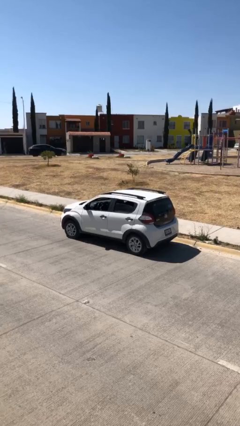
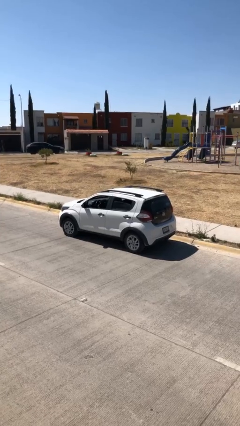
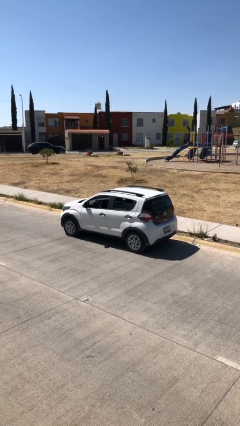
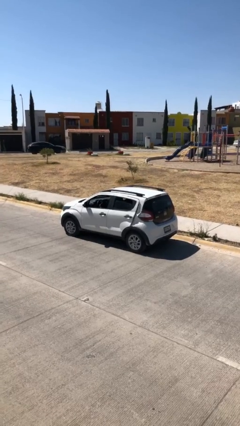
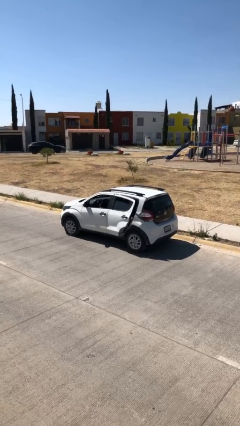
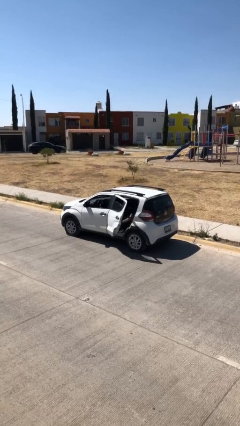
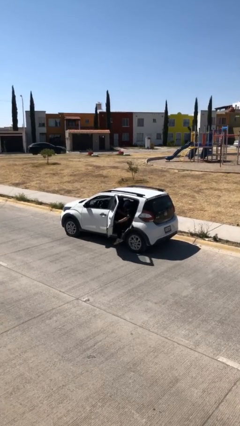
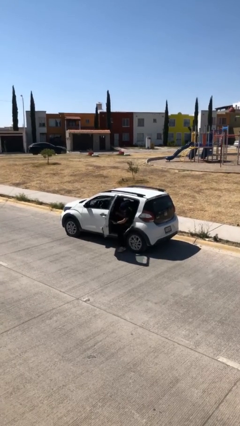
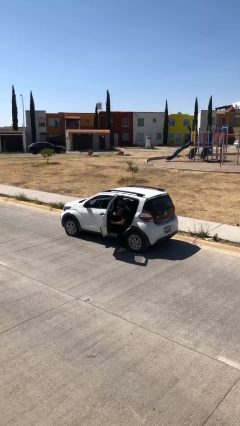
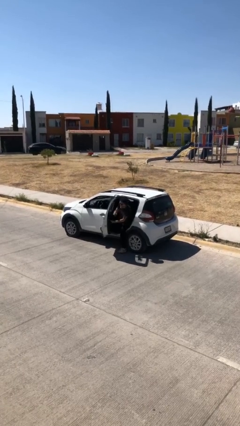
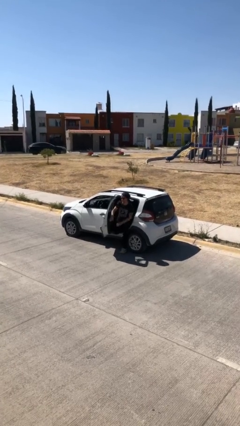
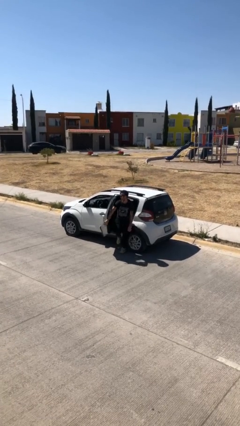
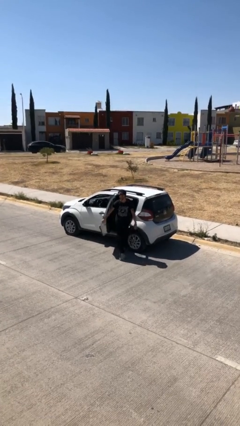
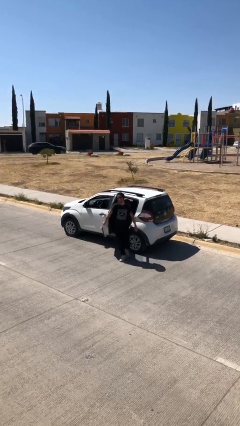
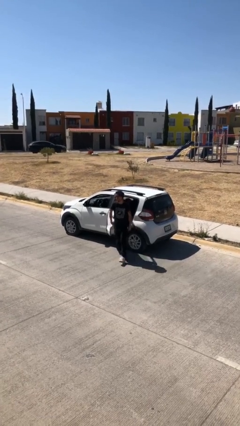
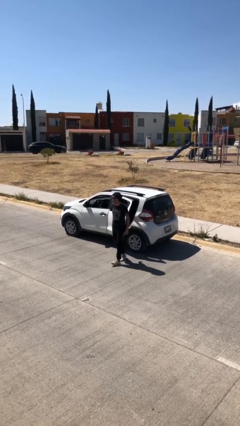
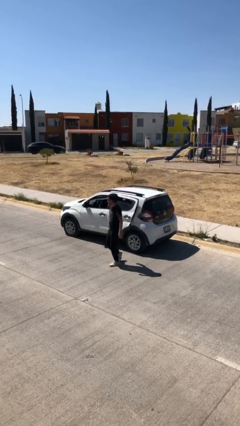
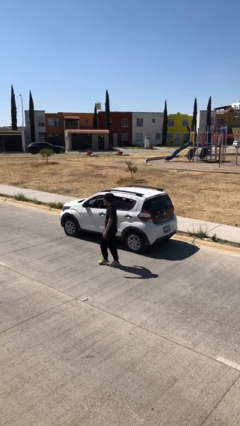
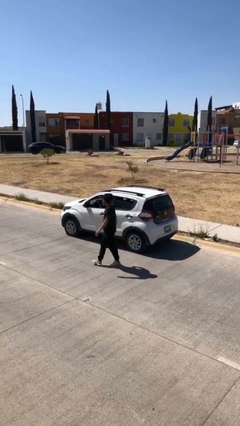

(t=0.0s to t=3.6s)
car drops off person

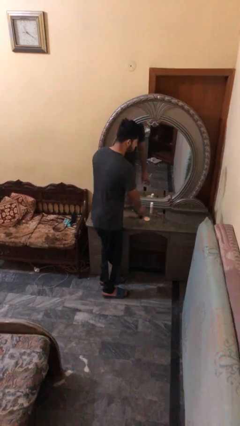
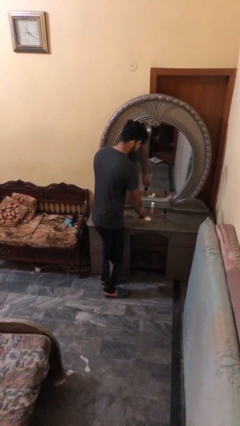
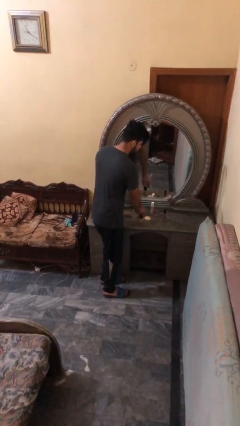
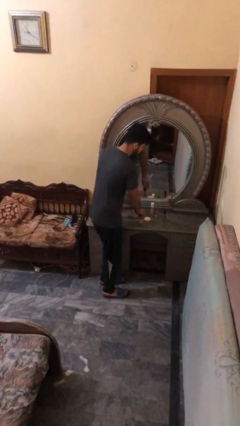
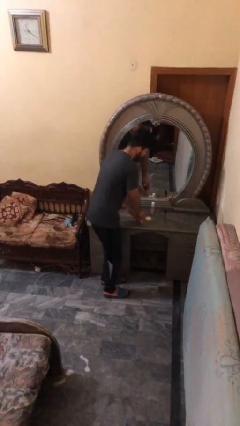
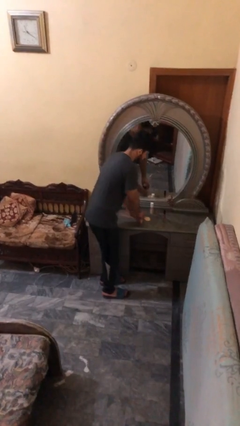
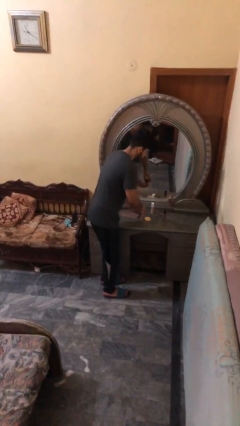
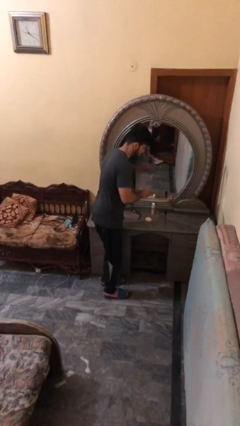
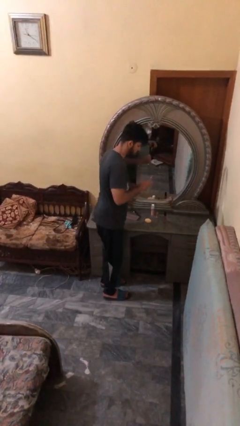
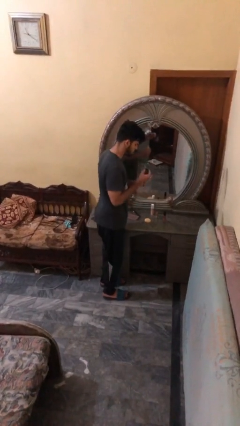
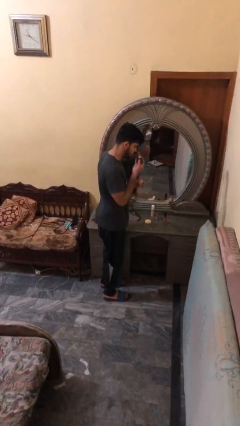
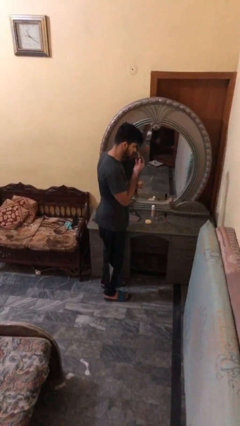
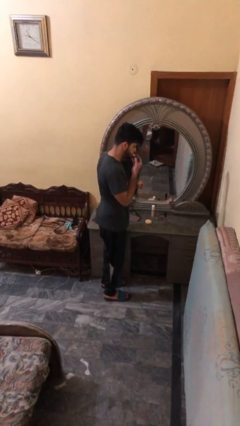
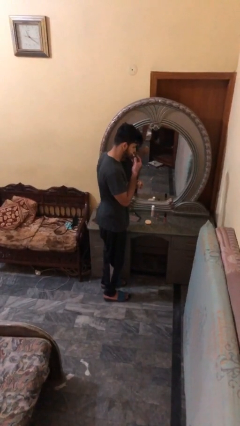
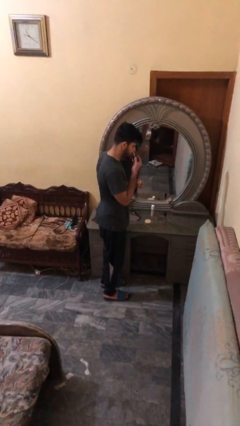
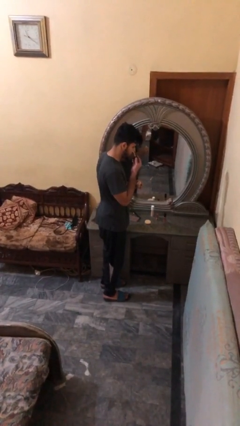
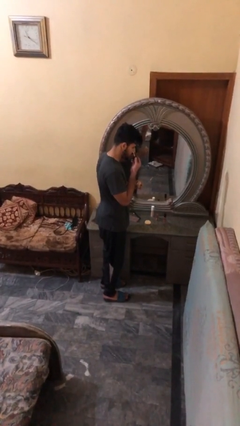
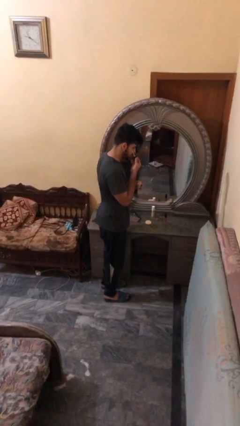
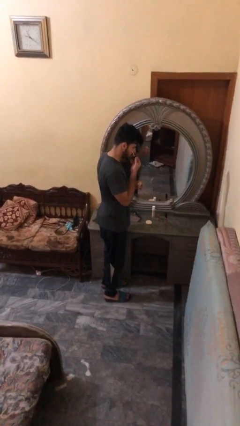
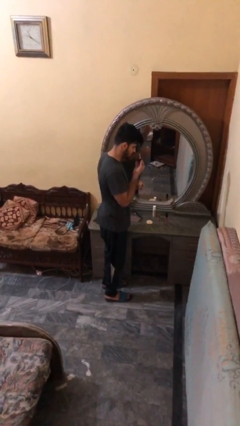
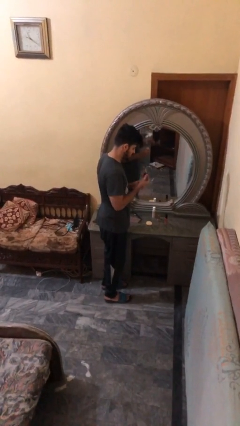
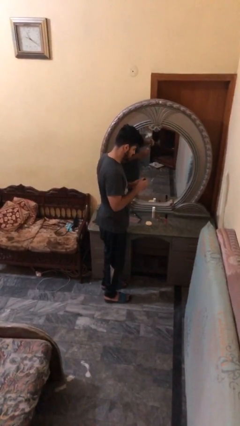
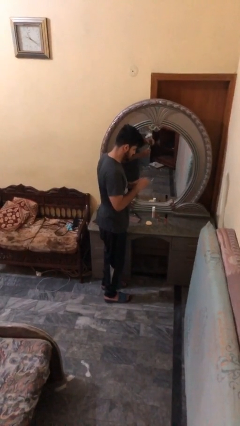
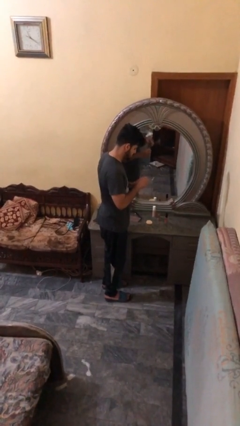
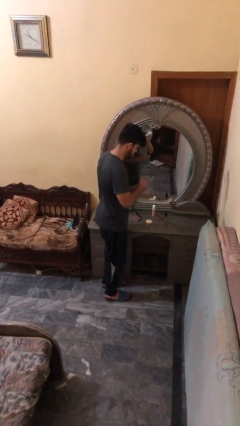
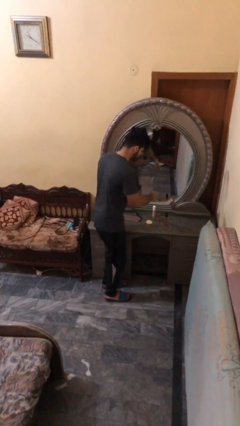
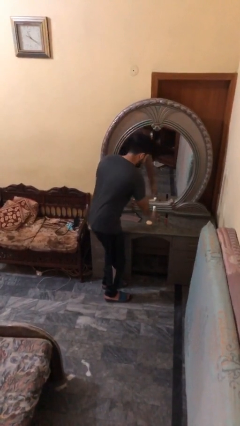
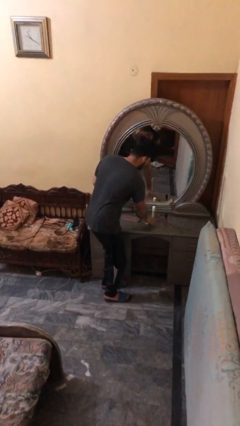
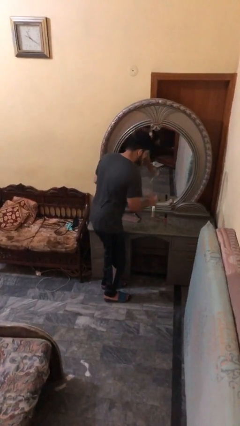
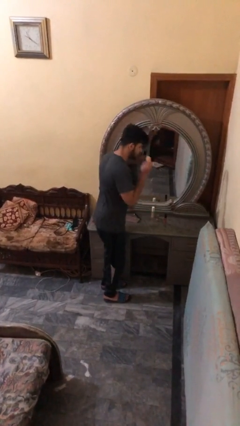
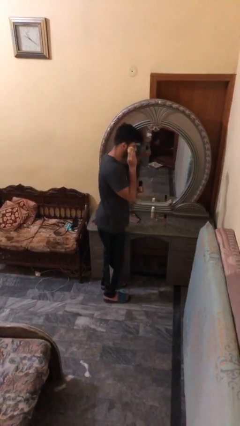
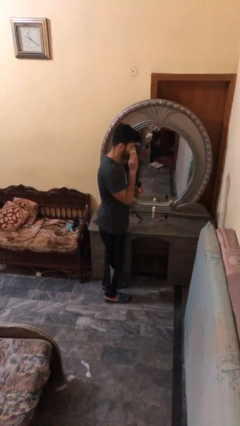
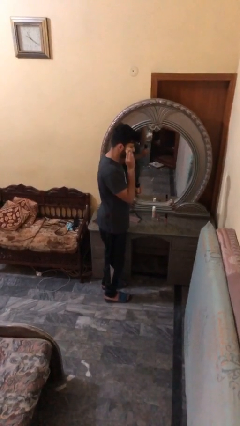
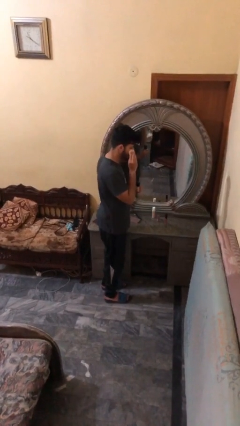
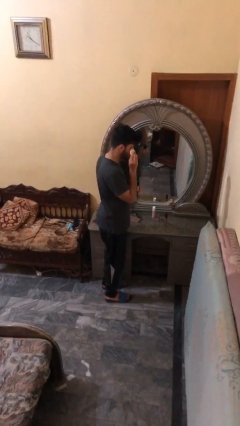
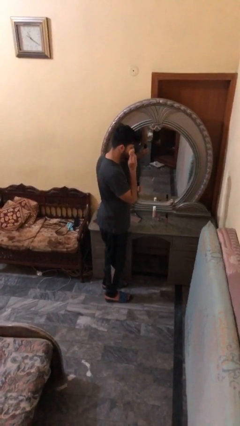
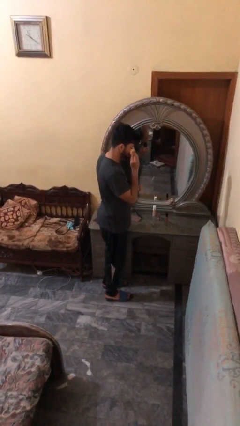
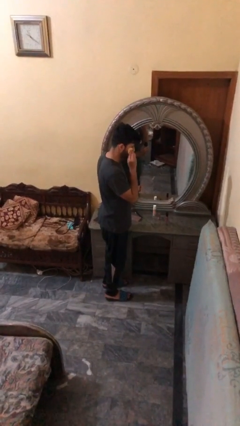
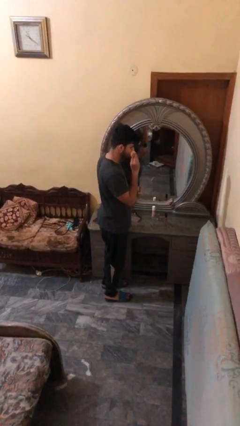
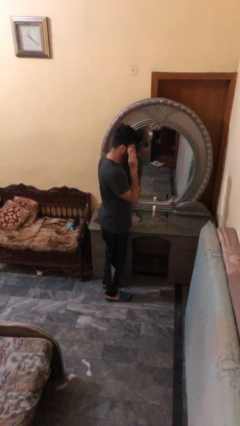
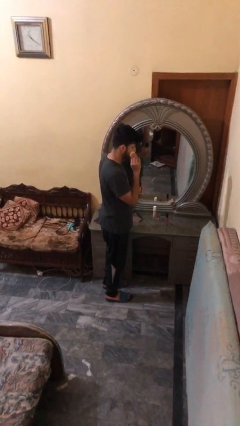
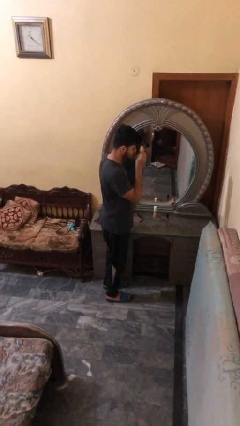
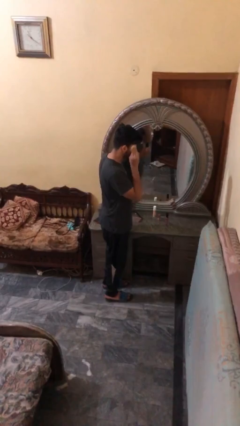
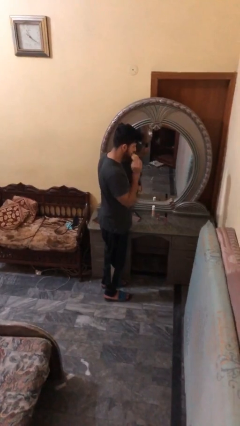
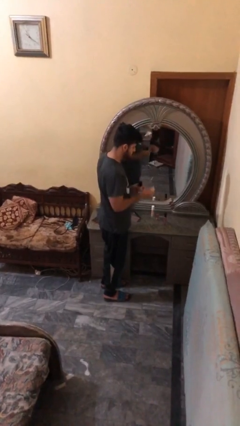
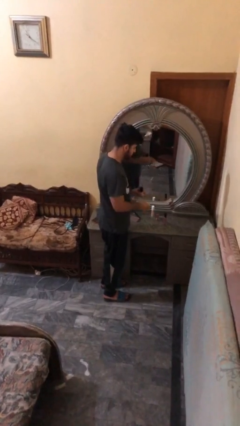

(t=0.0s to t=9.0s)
person applies foundation makeup

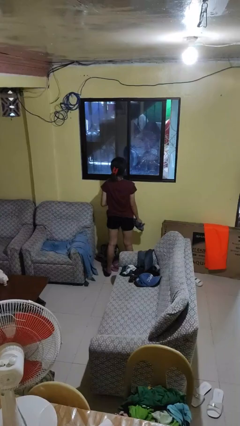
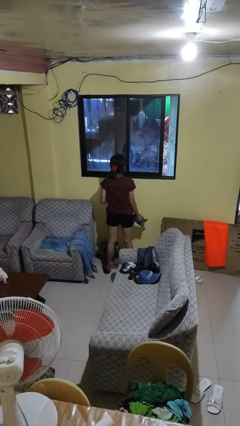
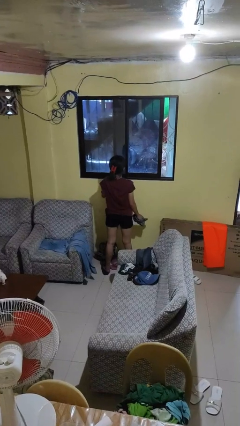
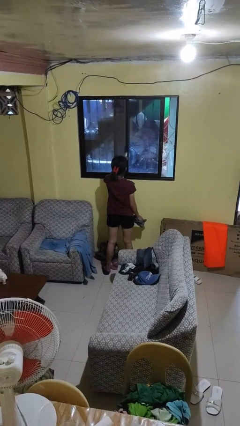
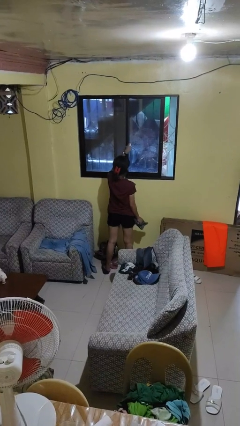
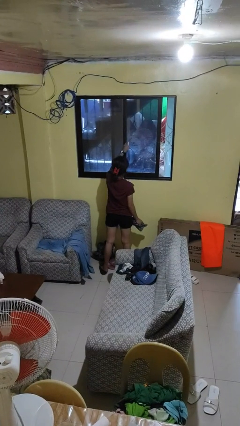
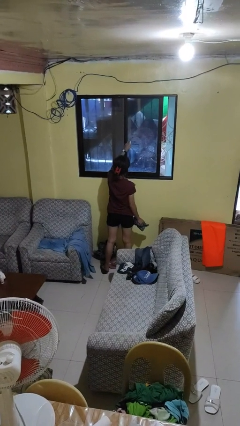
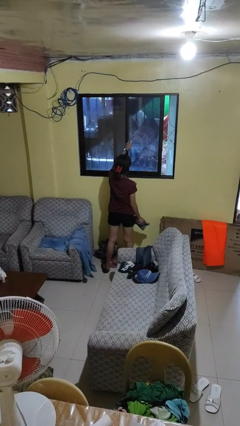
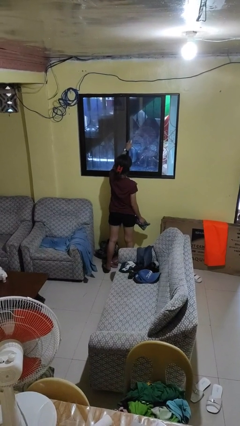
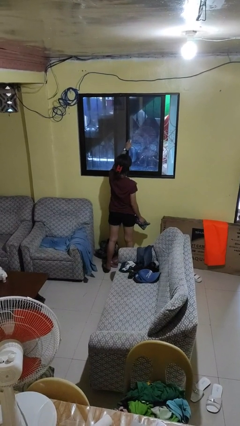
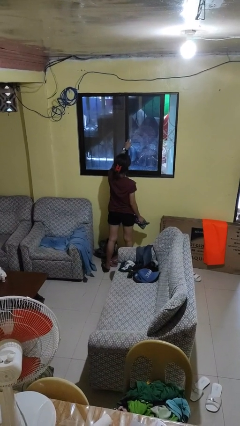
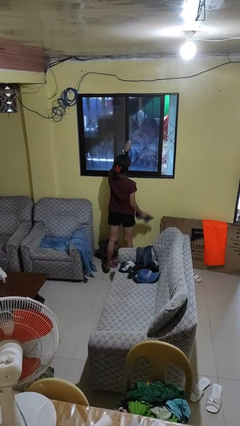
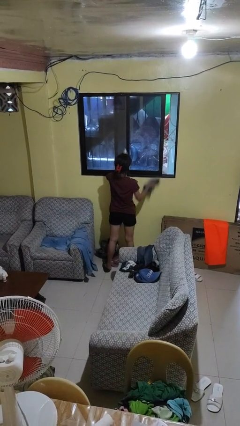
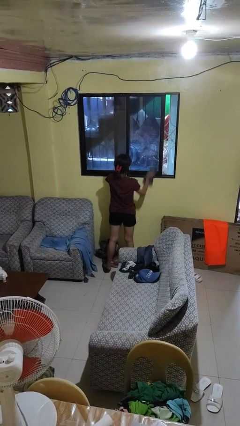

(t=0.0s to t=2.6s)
person sprays from bottle

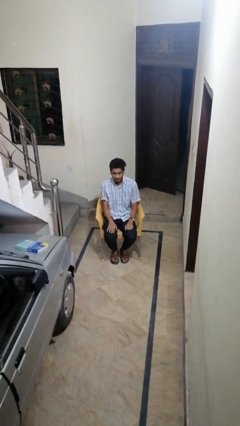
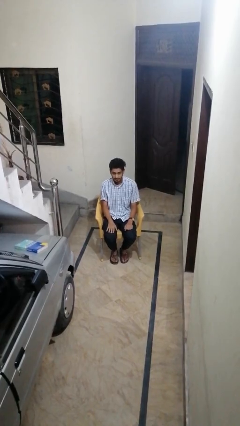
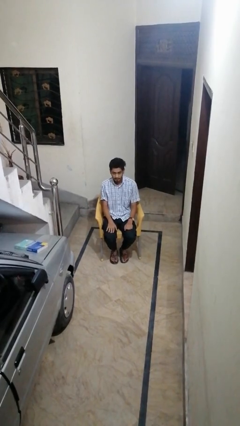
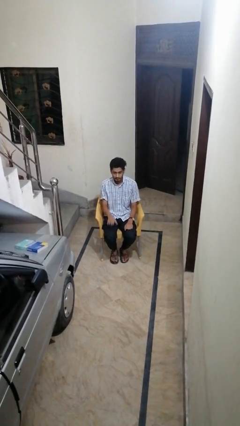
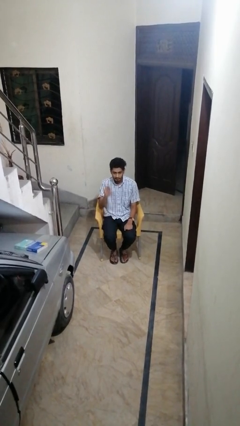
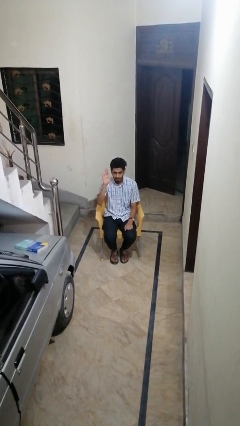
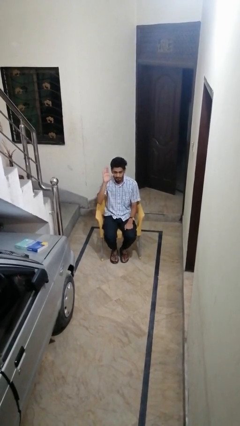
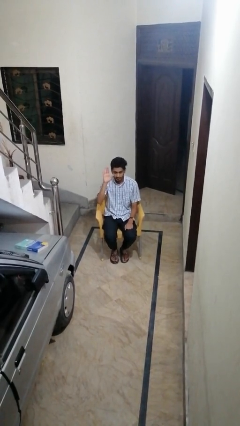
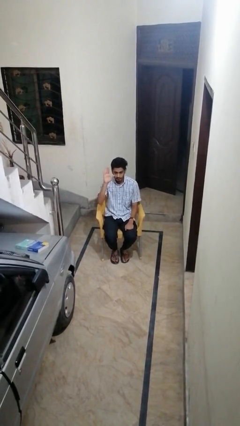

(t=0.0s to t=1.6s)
person gestures raise hand

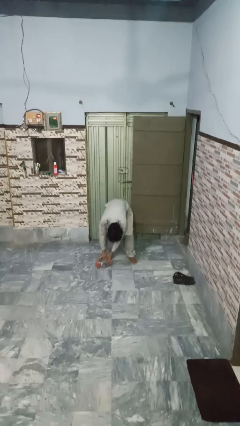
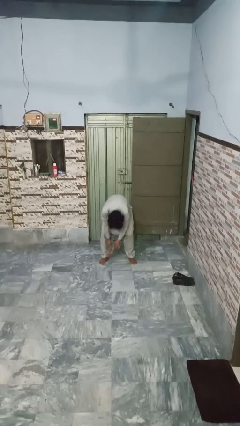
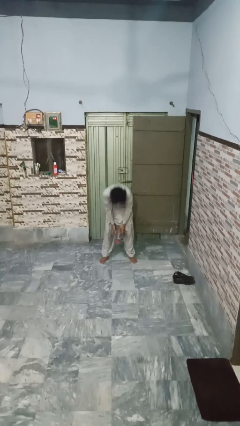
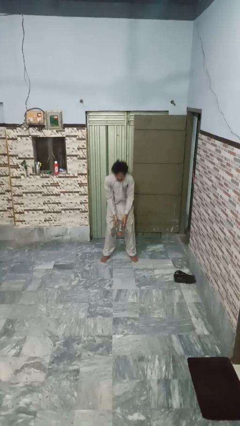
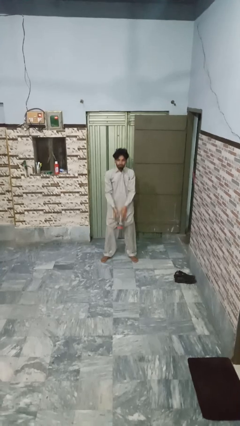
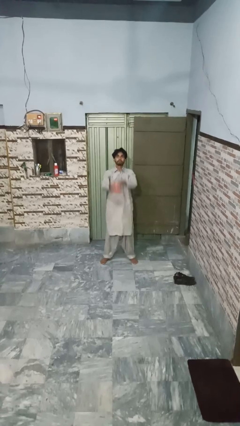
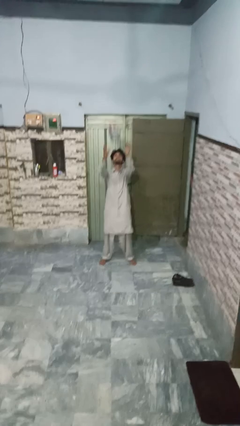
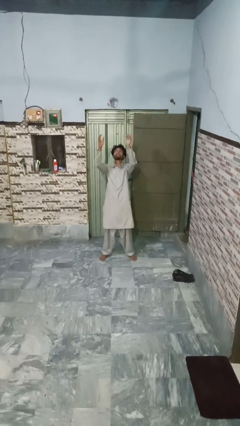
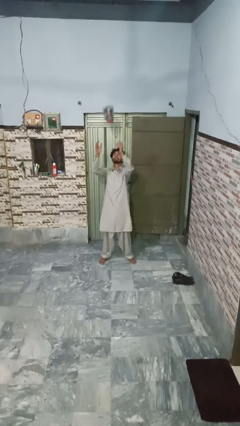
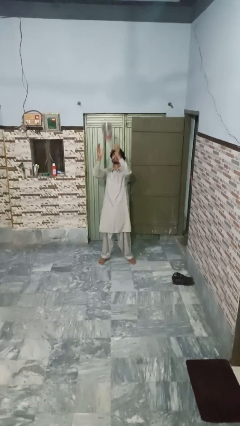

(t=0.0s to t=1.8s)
person picks up object from floor
